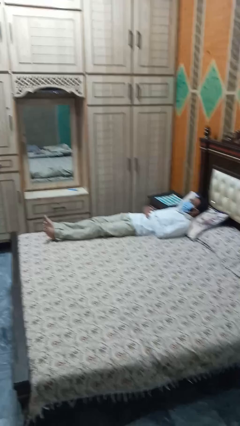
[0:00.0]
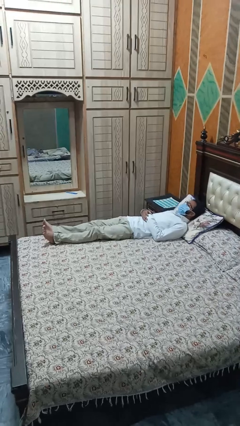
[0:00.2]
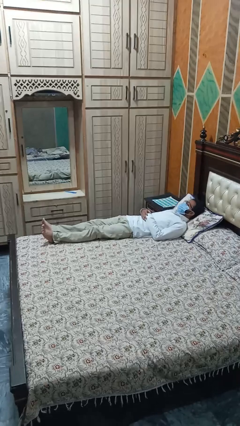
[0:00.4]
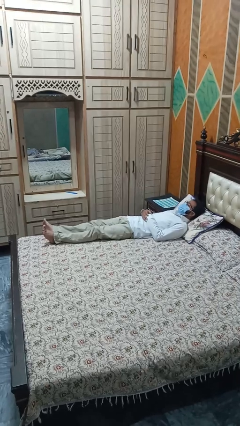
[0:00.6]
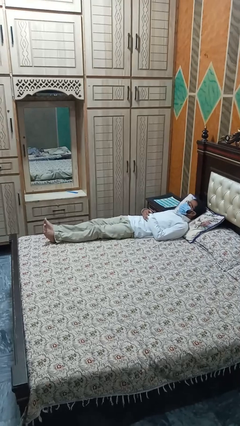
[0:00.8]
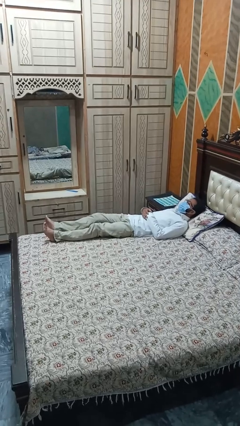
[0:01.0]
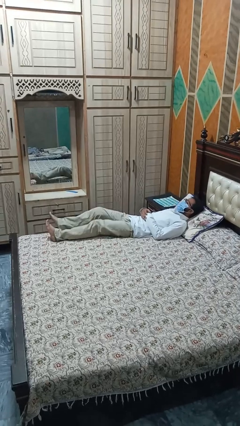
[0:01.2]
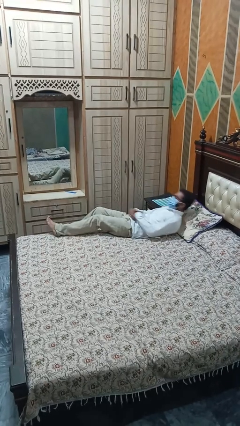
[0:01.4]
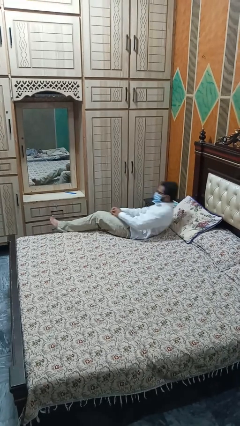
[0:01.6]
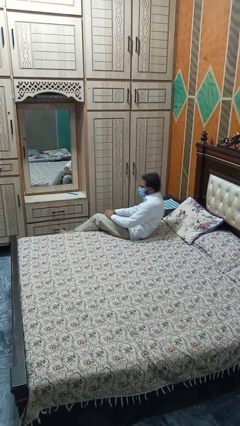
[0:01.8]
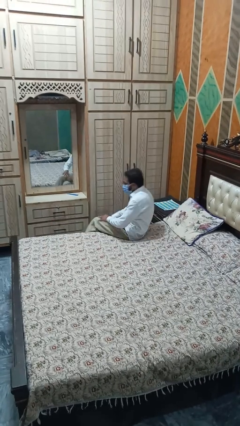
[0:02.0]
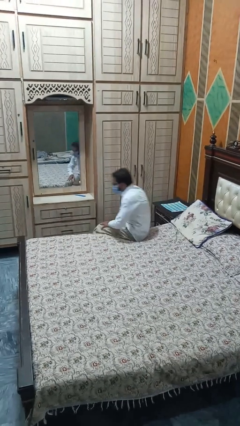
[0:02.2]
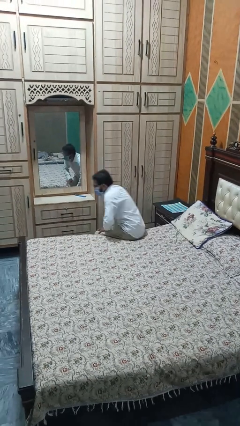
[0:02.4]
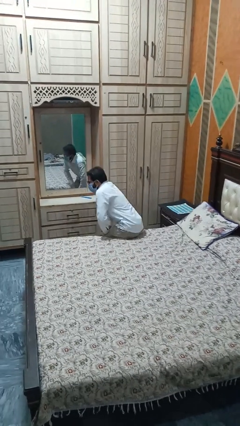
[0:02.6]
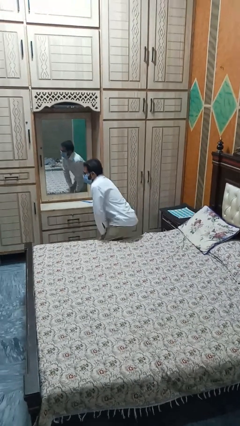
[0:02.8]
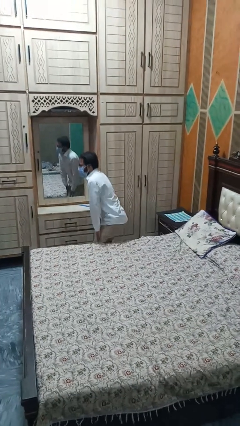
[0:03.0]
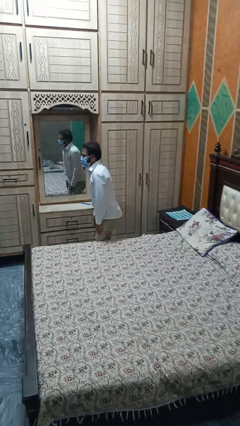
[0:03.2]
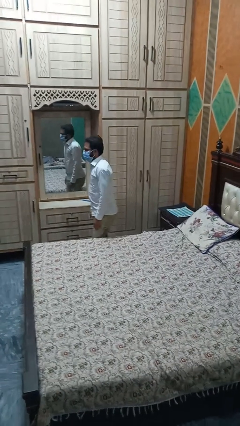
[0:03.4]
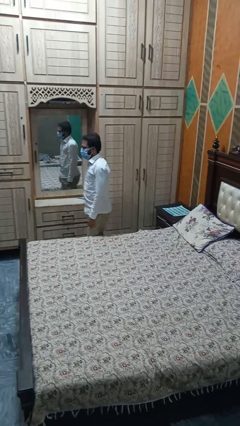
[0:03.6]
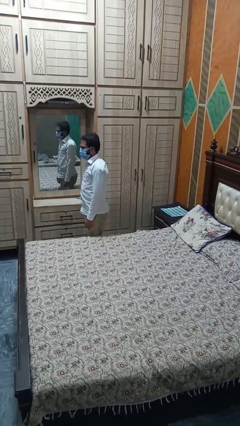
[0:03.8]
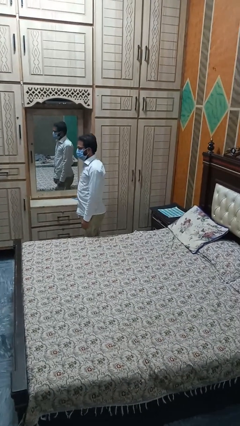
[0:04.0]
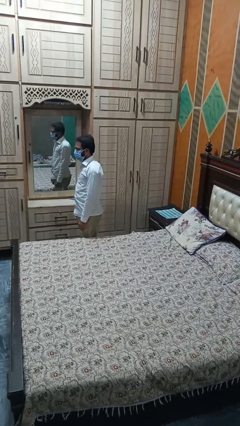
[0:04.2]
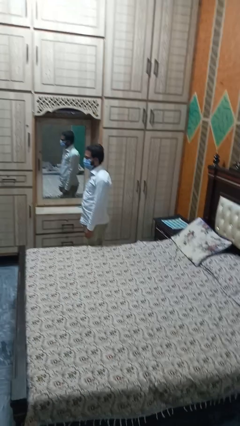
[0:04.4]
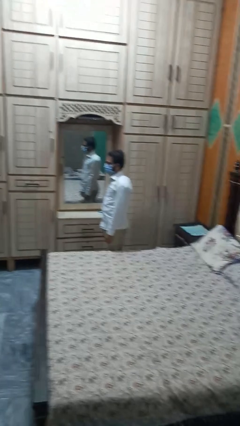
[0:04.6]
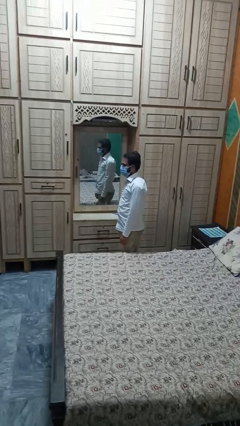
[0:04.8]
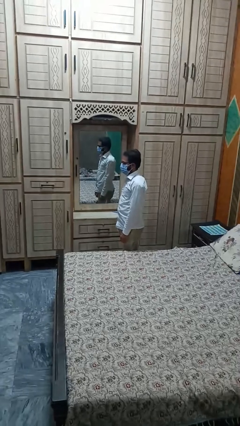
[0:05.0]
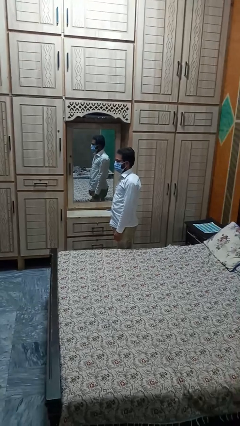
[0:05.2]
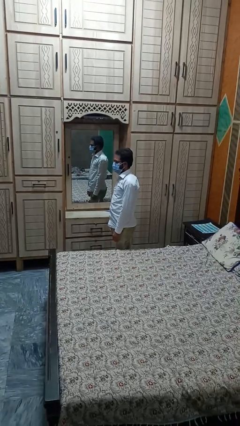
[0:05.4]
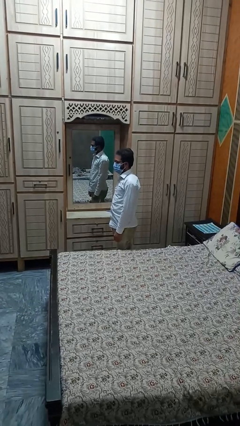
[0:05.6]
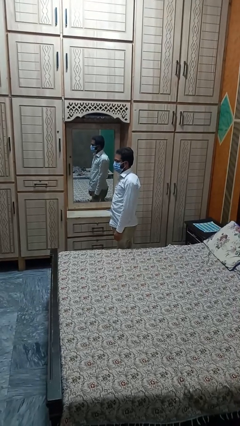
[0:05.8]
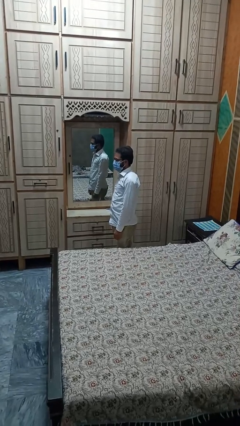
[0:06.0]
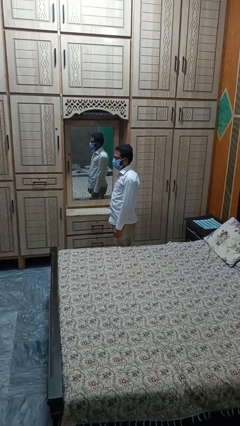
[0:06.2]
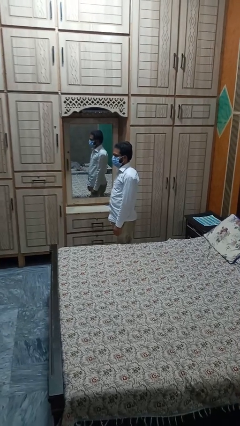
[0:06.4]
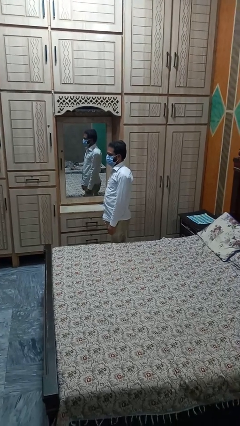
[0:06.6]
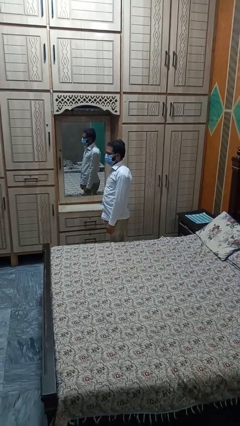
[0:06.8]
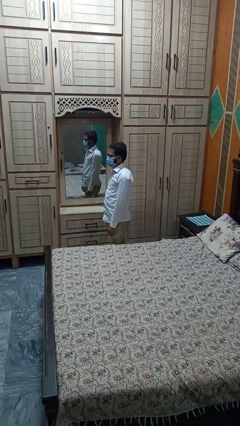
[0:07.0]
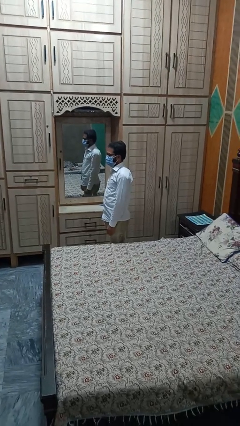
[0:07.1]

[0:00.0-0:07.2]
person stands up

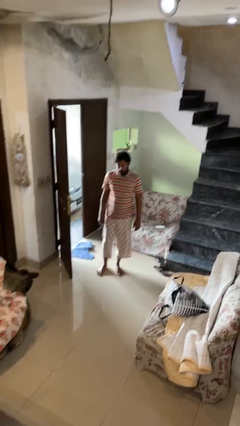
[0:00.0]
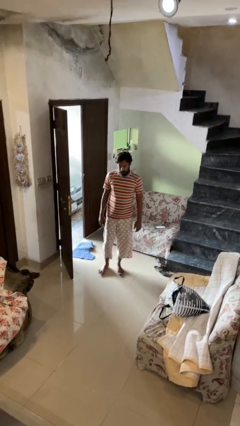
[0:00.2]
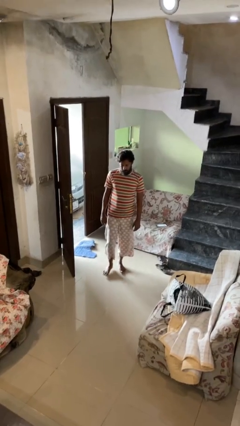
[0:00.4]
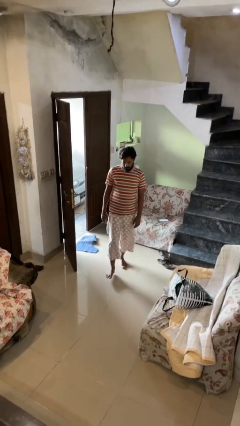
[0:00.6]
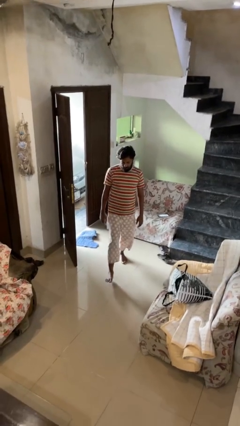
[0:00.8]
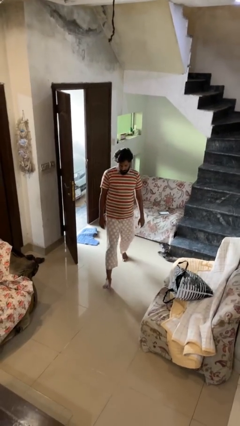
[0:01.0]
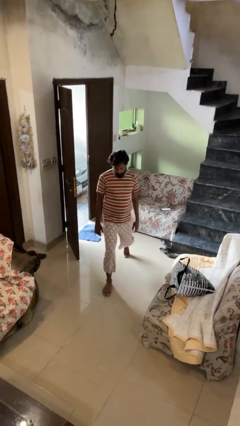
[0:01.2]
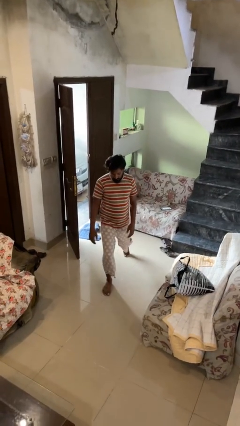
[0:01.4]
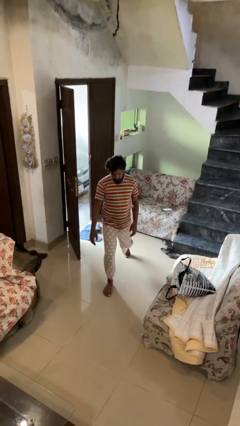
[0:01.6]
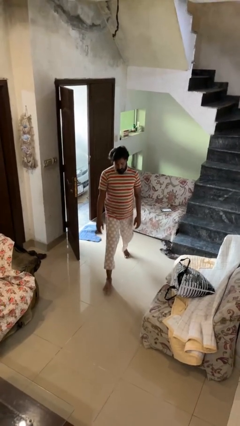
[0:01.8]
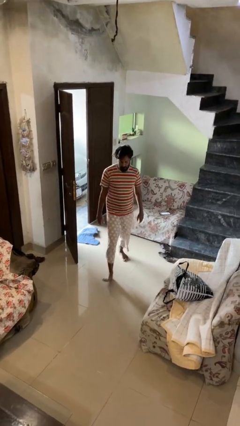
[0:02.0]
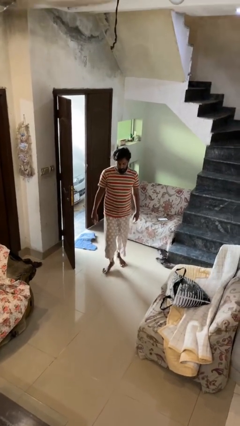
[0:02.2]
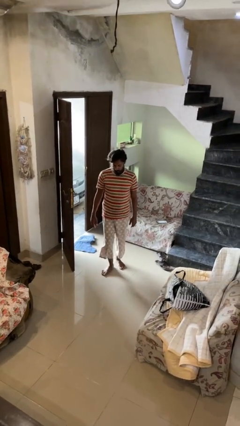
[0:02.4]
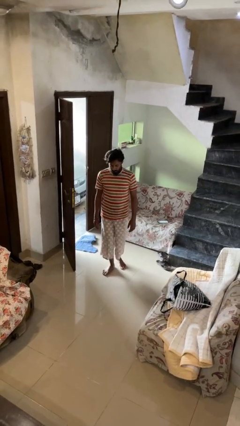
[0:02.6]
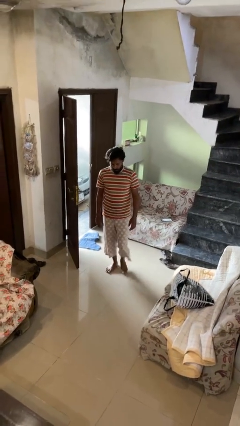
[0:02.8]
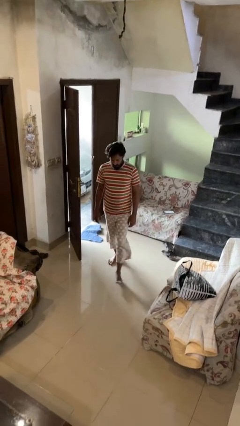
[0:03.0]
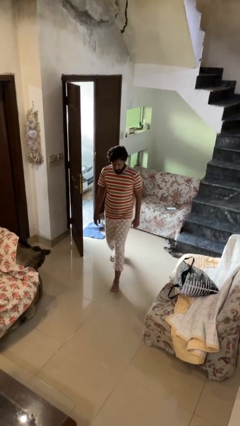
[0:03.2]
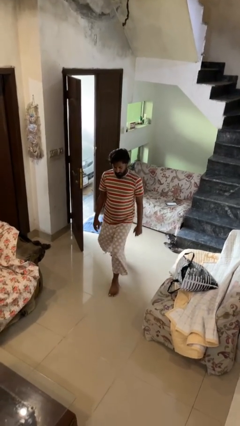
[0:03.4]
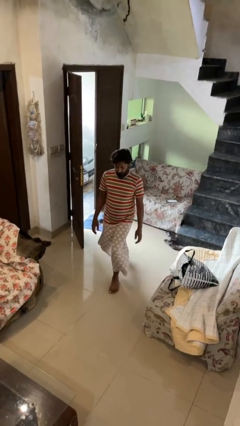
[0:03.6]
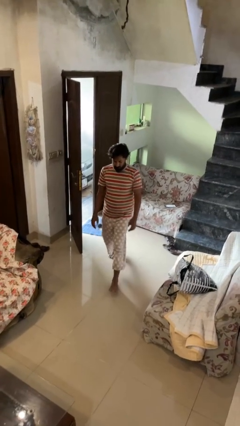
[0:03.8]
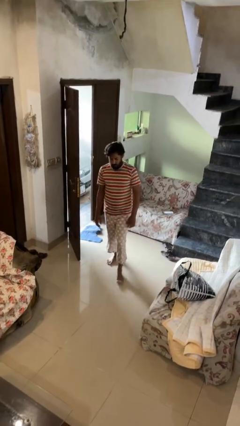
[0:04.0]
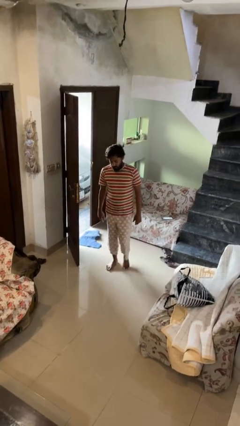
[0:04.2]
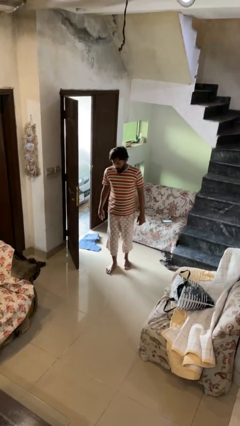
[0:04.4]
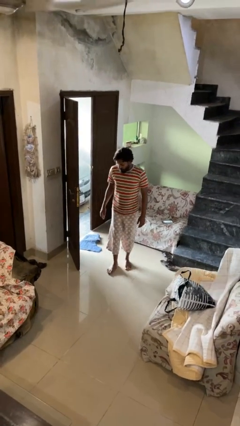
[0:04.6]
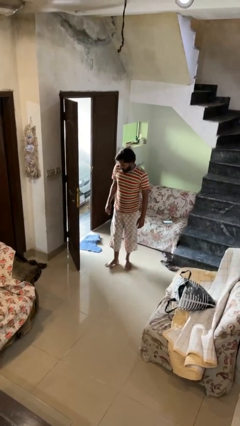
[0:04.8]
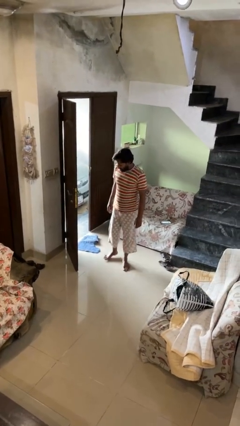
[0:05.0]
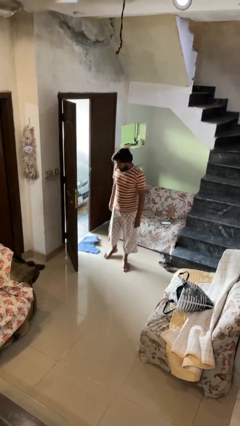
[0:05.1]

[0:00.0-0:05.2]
person exercises with lunges

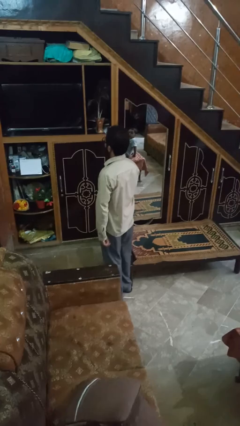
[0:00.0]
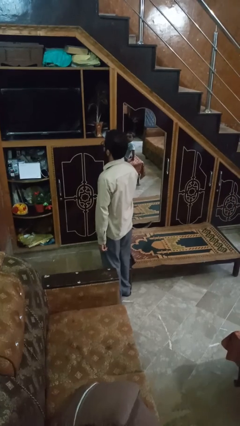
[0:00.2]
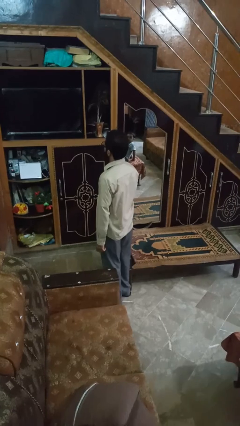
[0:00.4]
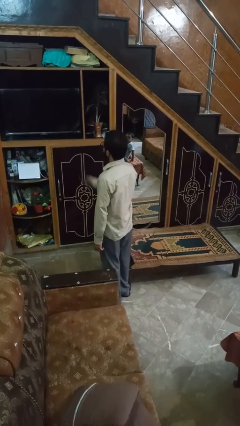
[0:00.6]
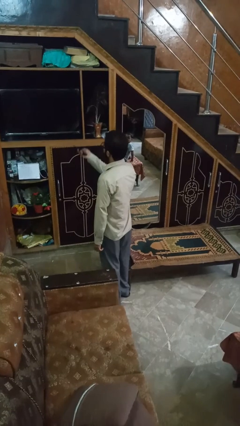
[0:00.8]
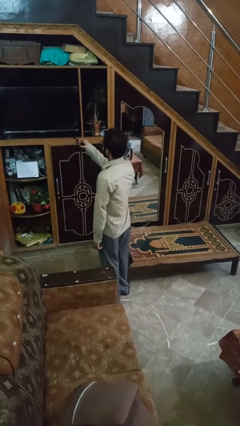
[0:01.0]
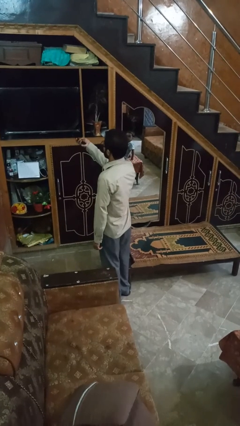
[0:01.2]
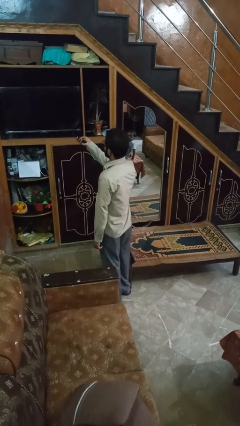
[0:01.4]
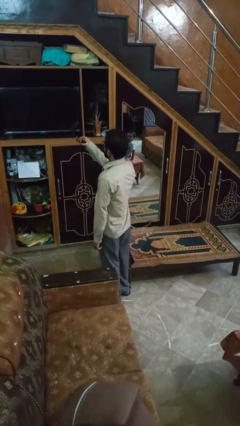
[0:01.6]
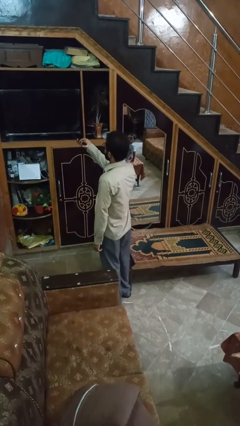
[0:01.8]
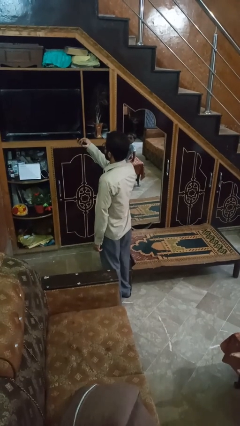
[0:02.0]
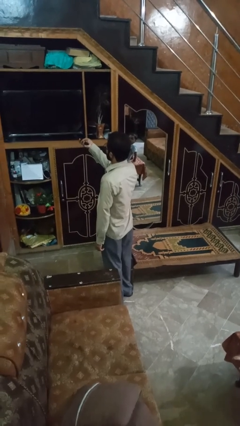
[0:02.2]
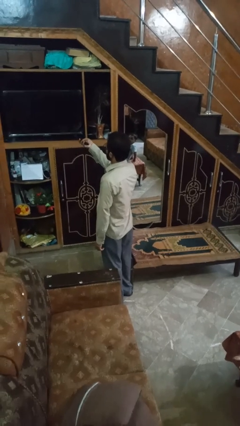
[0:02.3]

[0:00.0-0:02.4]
person uses television remote

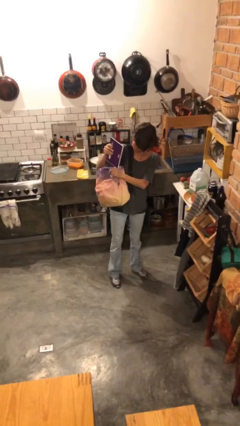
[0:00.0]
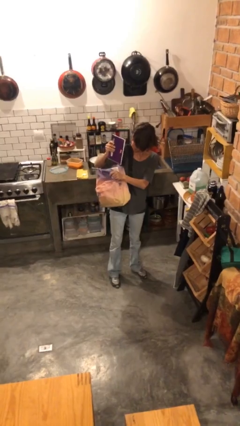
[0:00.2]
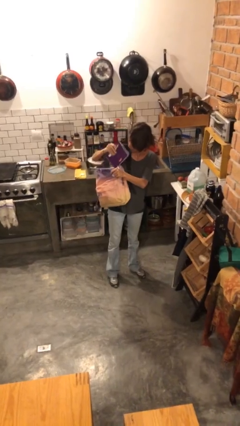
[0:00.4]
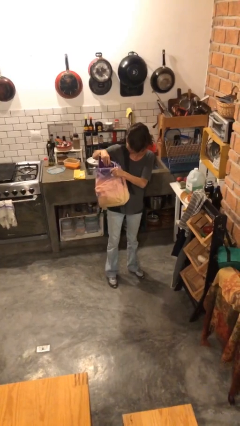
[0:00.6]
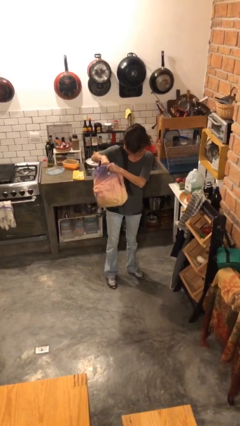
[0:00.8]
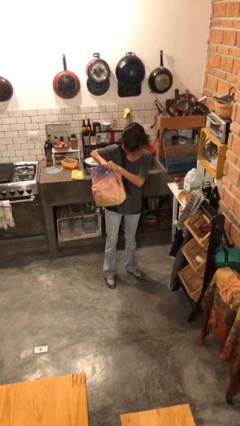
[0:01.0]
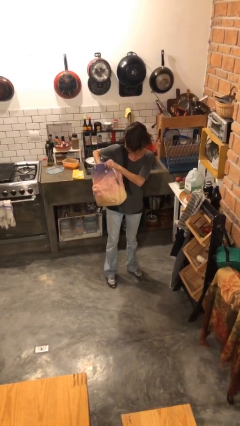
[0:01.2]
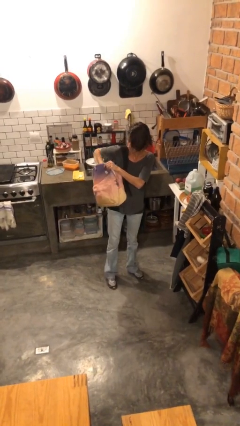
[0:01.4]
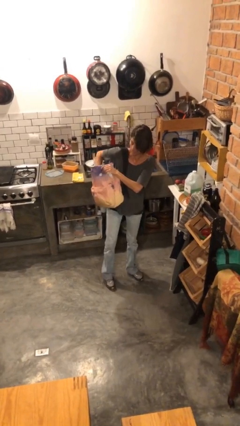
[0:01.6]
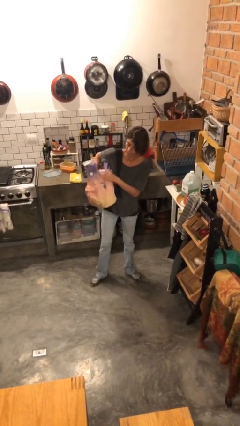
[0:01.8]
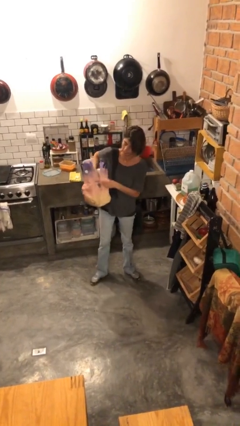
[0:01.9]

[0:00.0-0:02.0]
person puts object into backpack

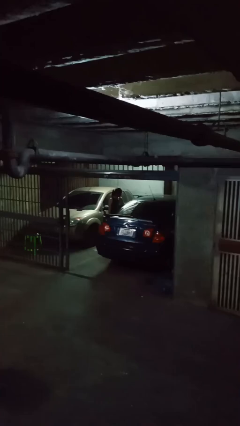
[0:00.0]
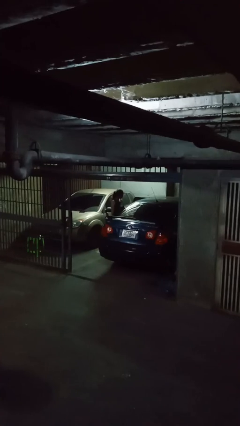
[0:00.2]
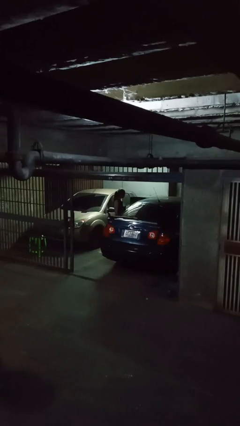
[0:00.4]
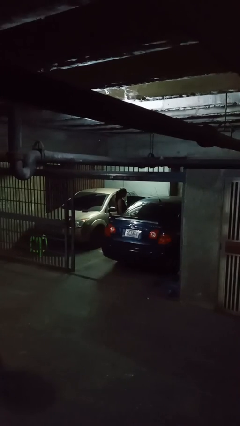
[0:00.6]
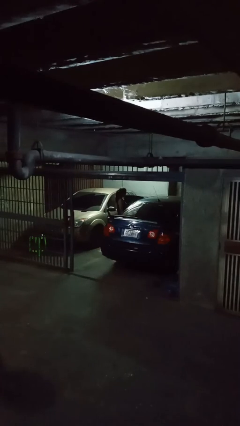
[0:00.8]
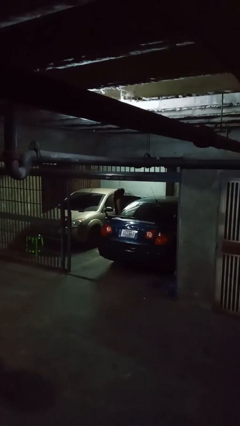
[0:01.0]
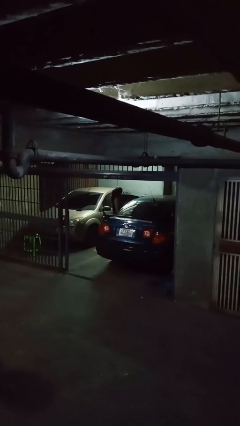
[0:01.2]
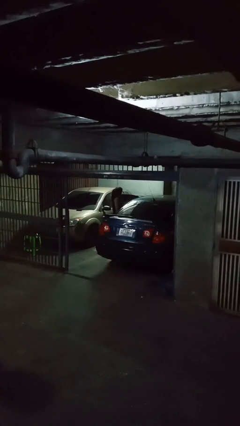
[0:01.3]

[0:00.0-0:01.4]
person opens car door
